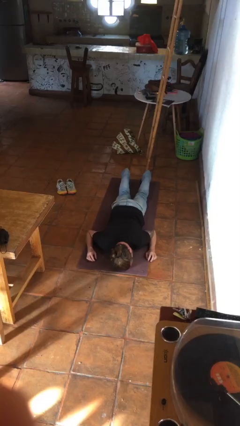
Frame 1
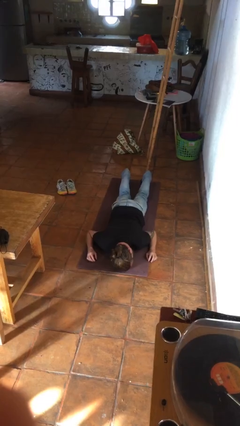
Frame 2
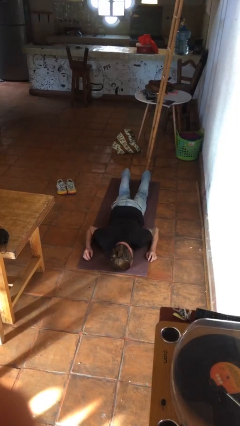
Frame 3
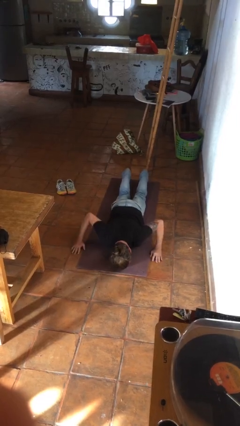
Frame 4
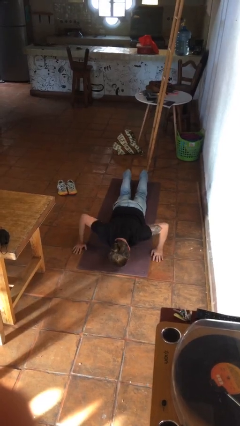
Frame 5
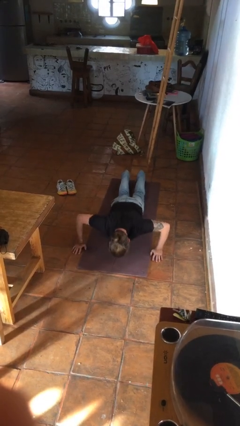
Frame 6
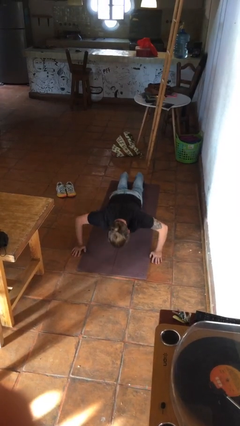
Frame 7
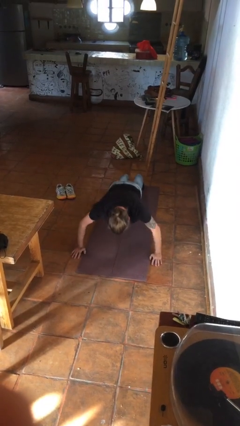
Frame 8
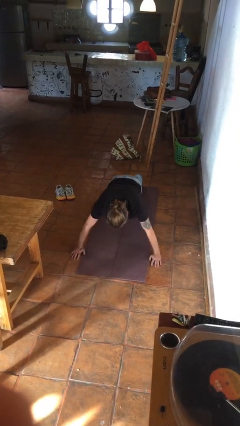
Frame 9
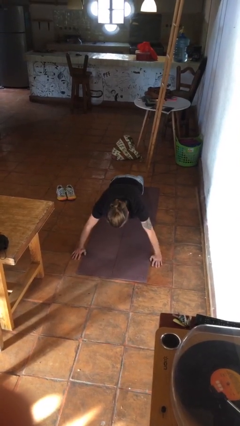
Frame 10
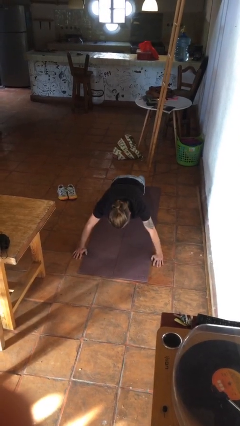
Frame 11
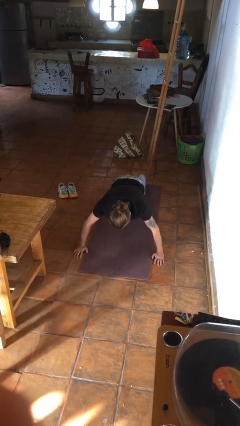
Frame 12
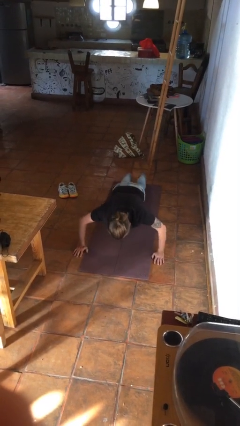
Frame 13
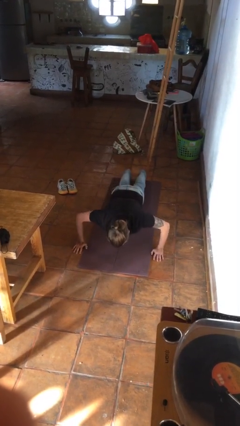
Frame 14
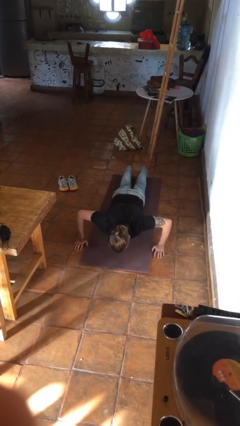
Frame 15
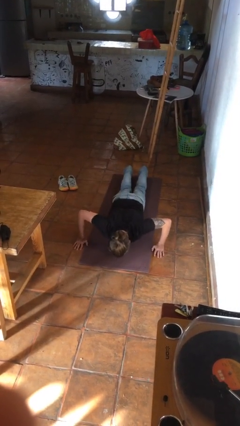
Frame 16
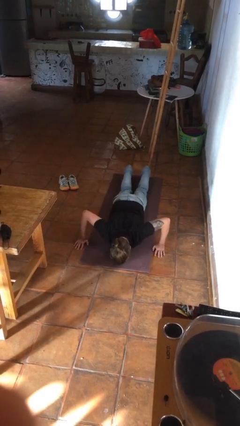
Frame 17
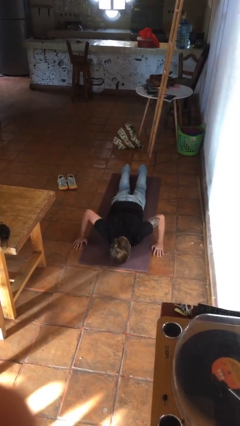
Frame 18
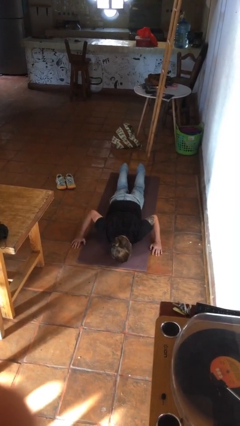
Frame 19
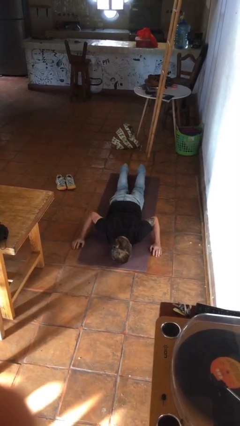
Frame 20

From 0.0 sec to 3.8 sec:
person exercises with pushup

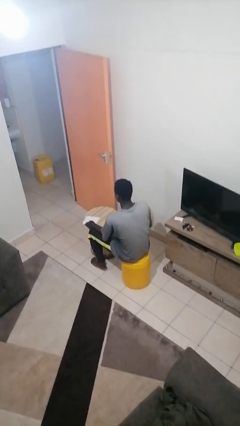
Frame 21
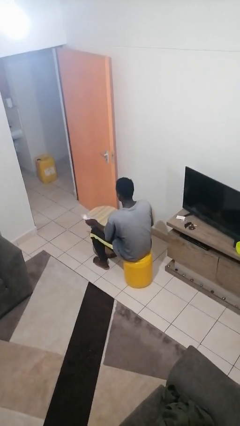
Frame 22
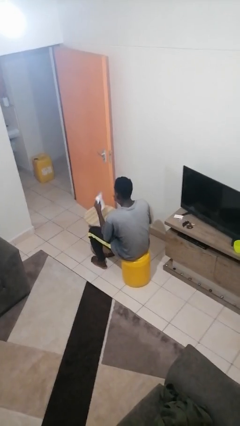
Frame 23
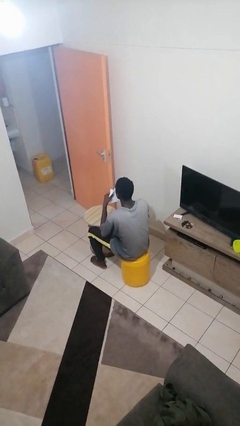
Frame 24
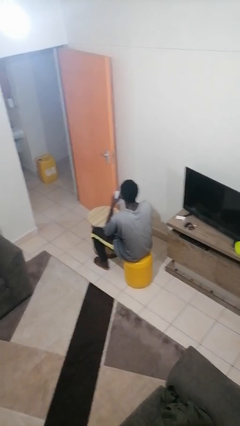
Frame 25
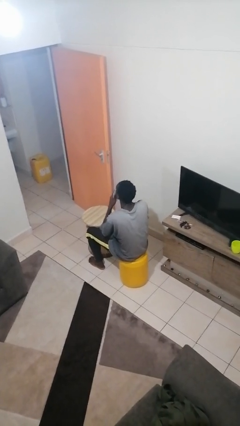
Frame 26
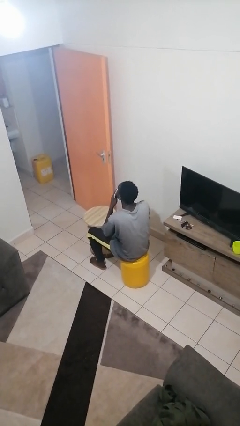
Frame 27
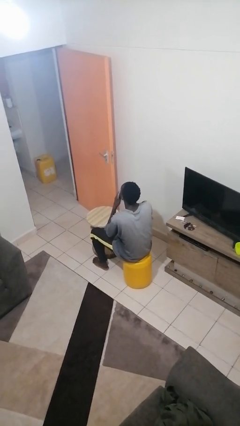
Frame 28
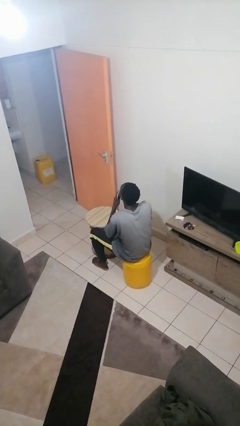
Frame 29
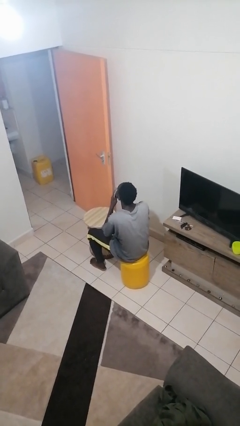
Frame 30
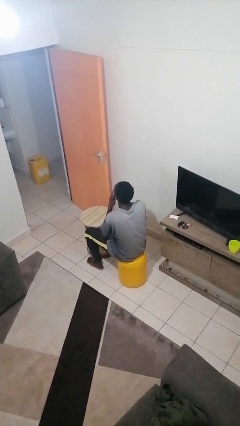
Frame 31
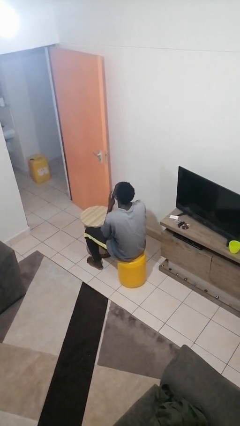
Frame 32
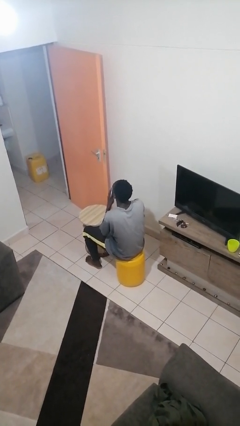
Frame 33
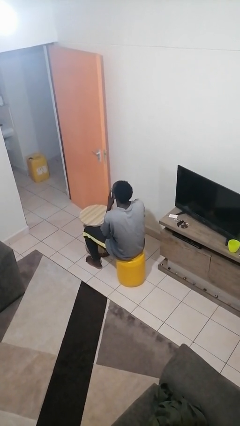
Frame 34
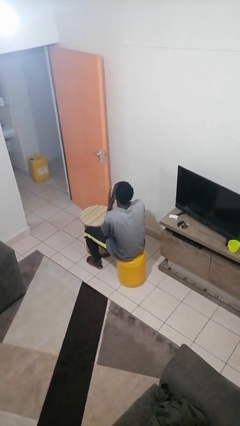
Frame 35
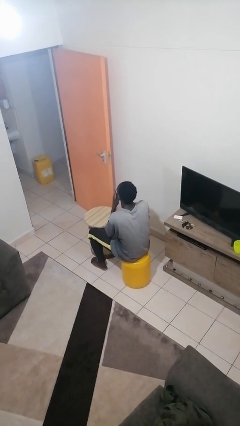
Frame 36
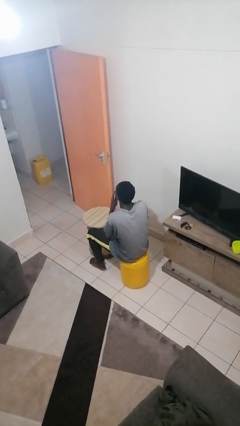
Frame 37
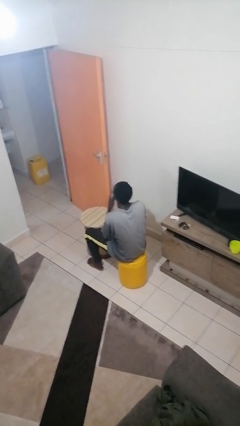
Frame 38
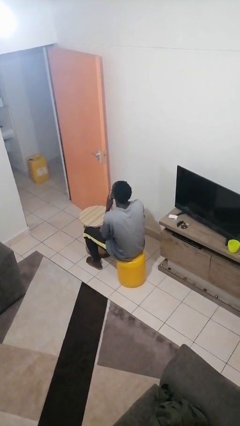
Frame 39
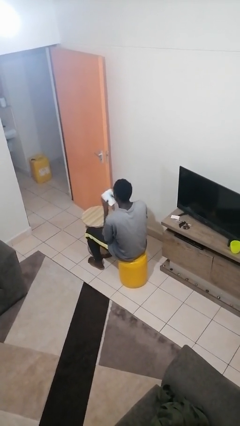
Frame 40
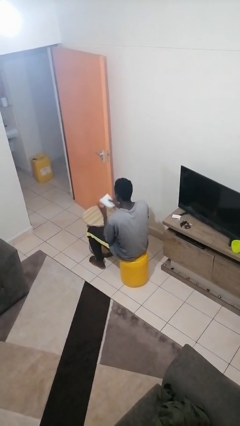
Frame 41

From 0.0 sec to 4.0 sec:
person wipes mouth with napkin

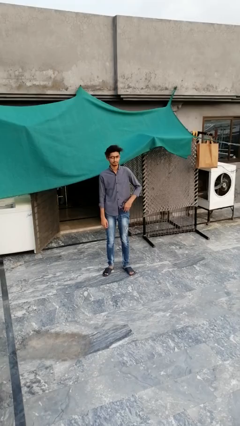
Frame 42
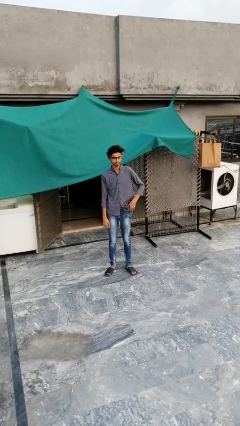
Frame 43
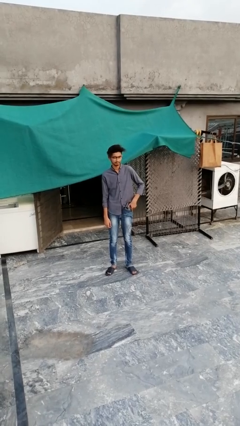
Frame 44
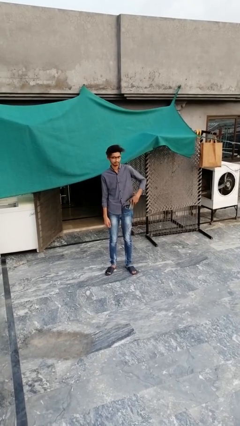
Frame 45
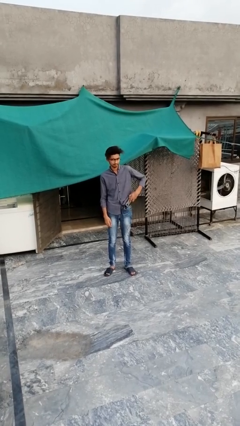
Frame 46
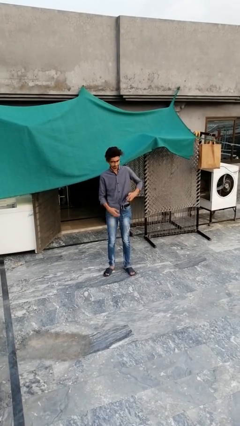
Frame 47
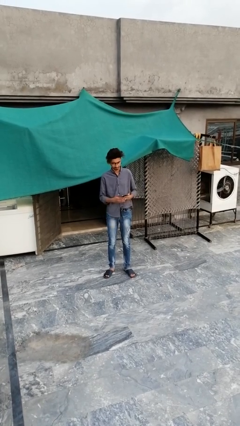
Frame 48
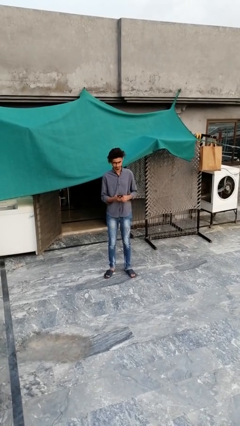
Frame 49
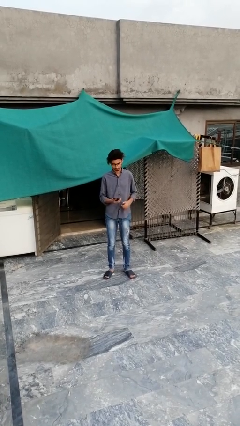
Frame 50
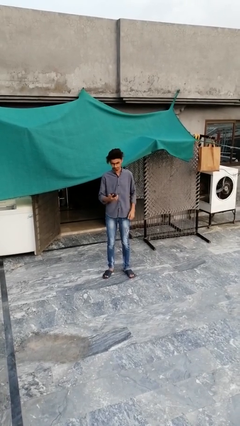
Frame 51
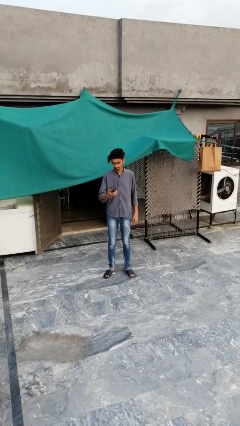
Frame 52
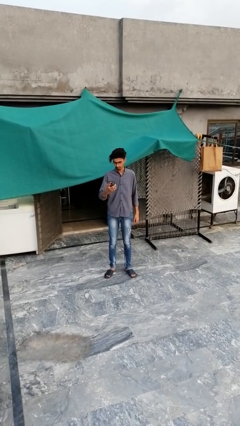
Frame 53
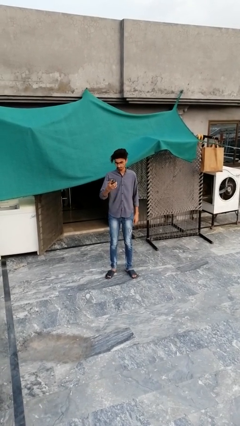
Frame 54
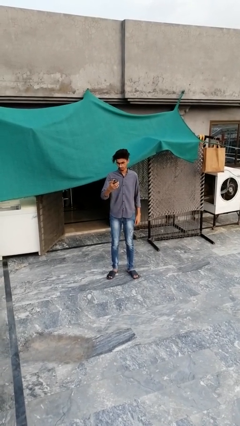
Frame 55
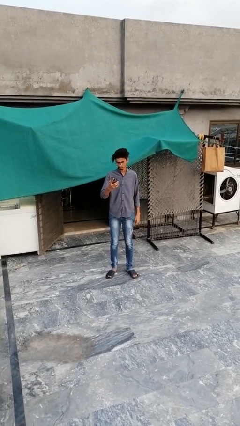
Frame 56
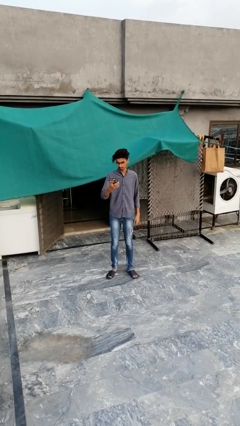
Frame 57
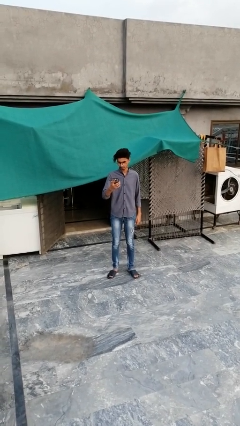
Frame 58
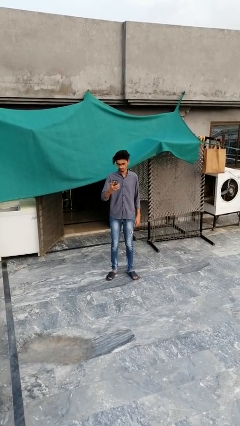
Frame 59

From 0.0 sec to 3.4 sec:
person takes phone from pocket

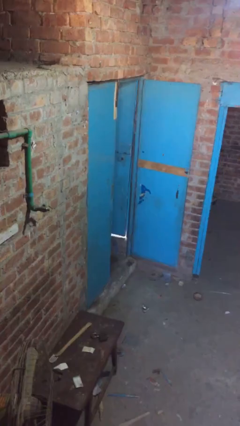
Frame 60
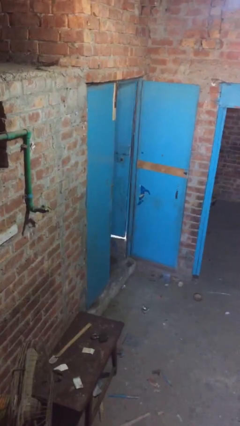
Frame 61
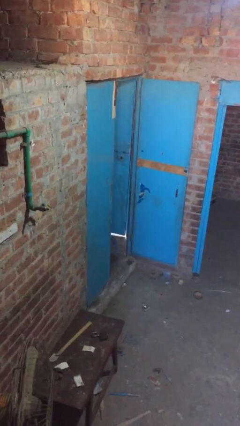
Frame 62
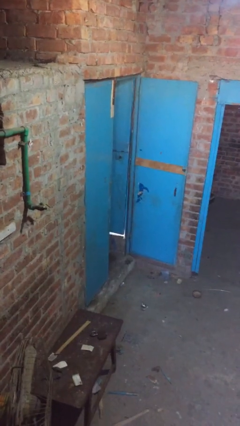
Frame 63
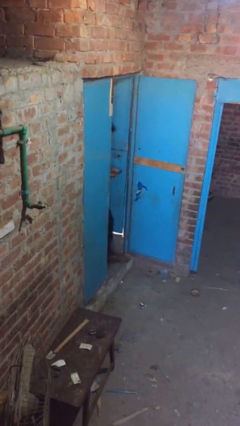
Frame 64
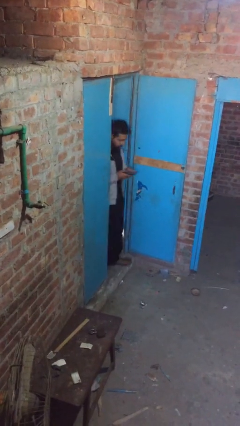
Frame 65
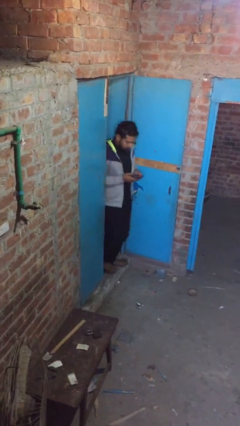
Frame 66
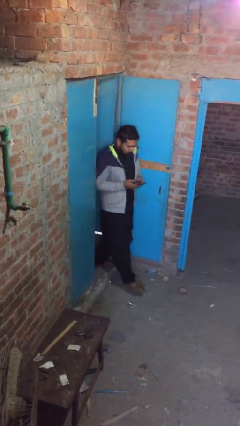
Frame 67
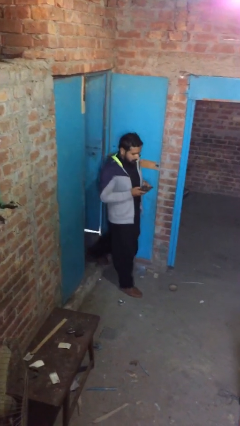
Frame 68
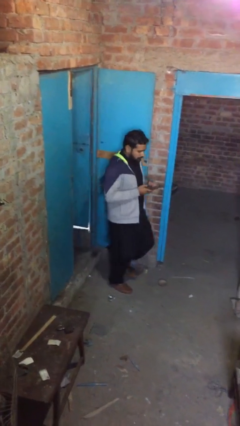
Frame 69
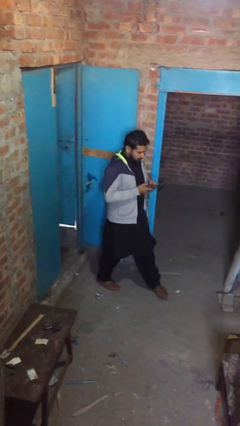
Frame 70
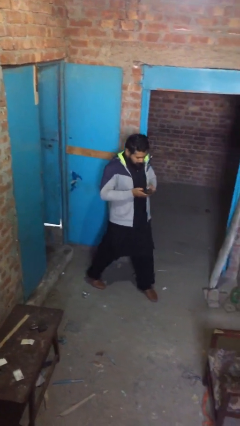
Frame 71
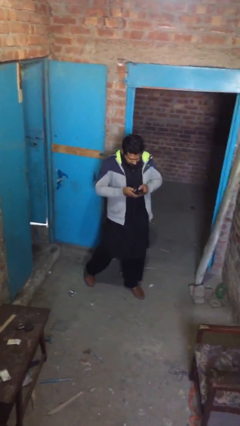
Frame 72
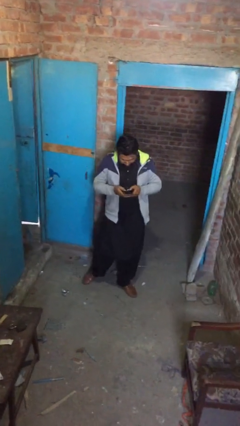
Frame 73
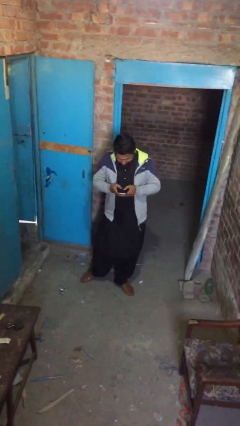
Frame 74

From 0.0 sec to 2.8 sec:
person enters scene through structure

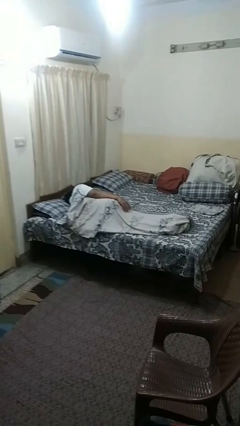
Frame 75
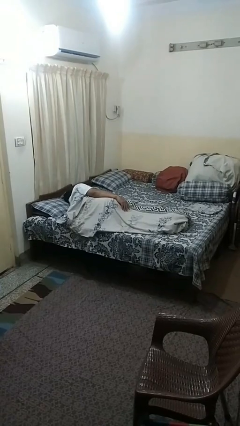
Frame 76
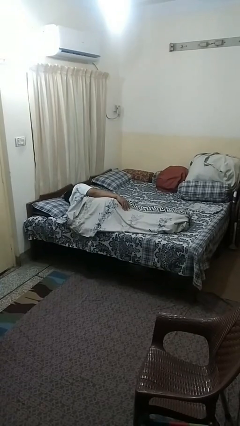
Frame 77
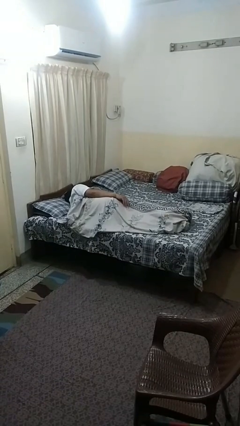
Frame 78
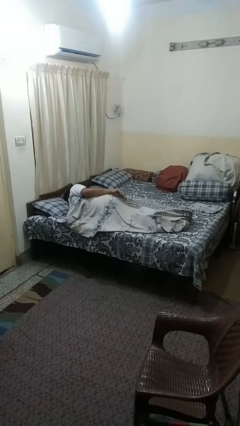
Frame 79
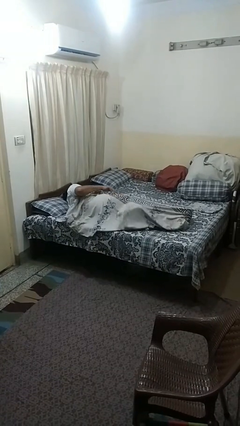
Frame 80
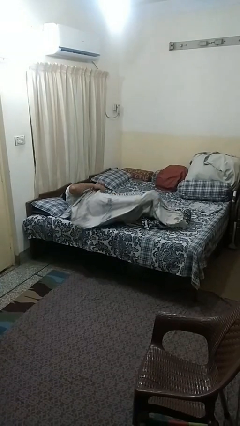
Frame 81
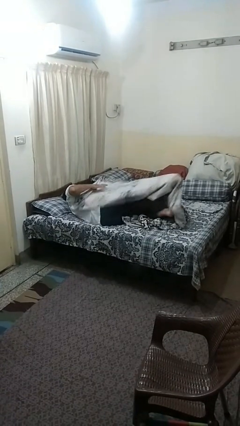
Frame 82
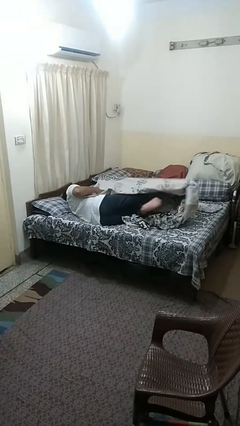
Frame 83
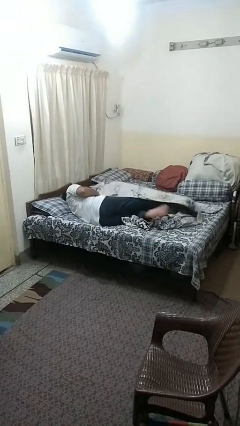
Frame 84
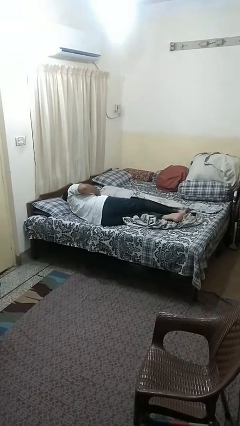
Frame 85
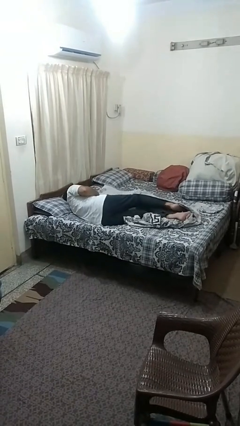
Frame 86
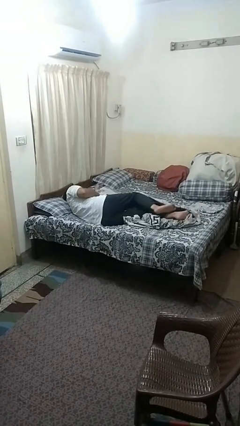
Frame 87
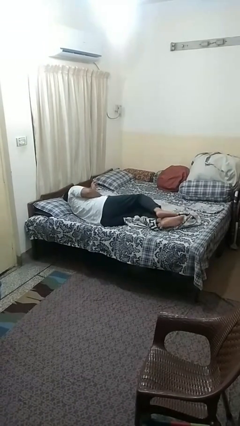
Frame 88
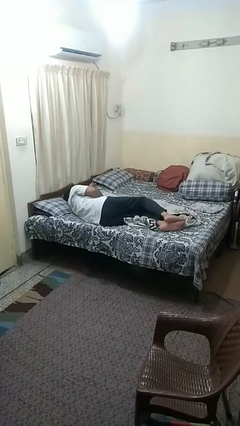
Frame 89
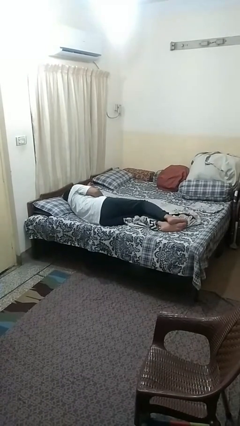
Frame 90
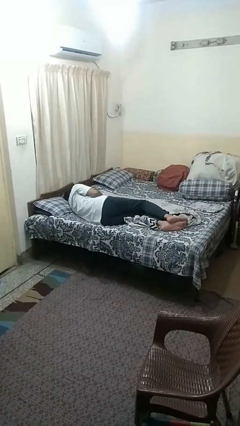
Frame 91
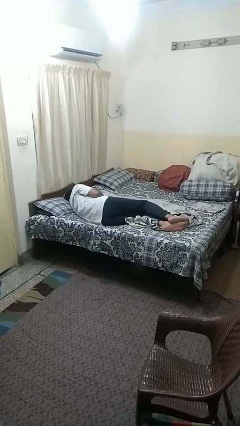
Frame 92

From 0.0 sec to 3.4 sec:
person uncovers with bedsheets
